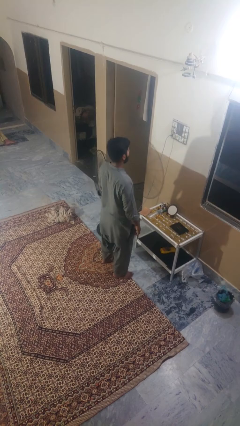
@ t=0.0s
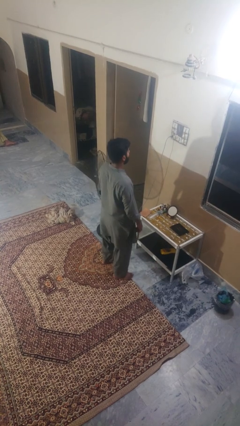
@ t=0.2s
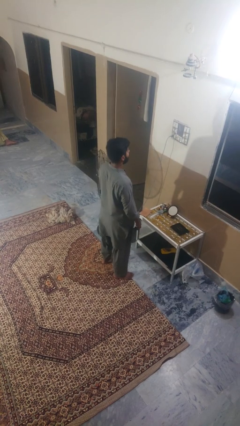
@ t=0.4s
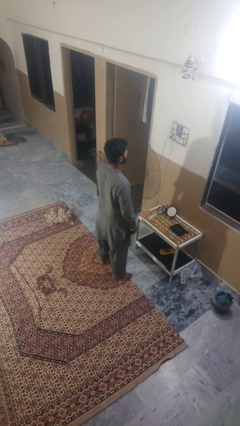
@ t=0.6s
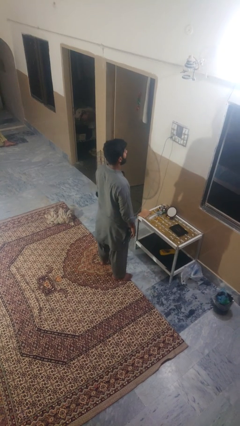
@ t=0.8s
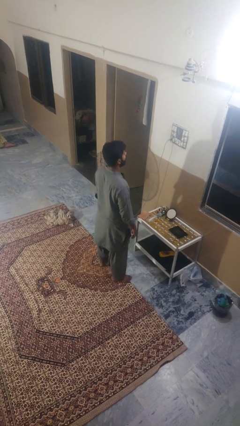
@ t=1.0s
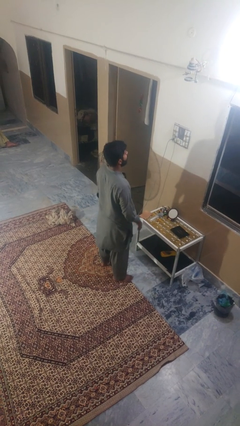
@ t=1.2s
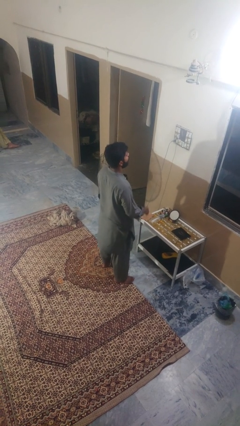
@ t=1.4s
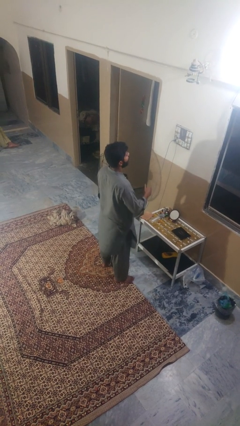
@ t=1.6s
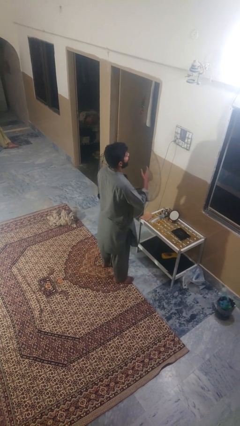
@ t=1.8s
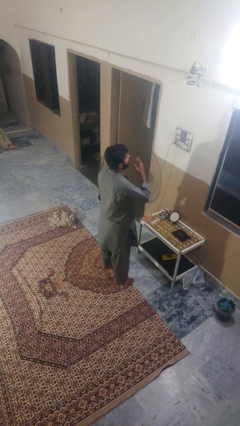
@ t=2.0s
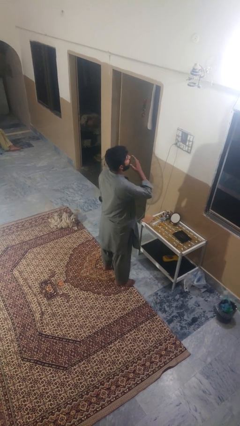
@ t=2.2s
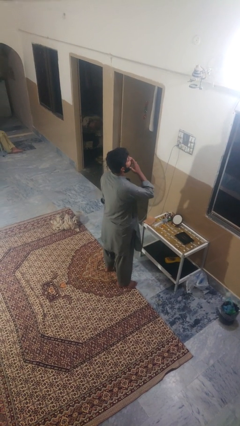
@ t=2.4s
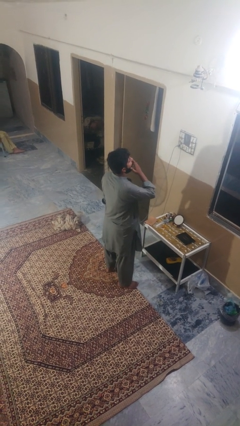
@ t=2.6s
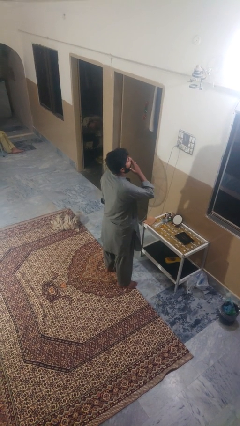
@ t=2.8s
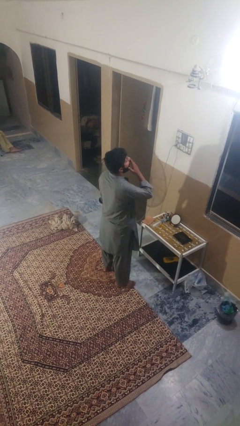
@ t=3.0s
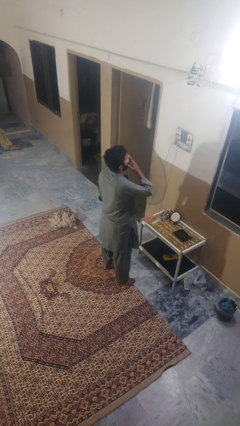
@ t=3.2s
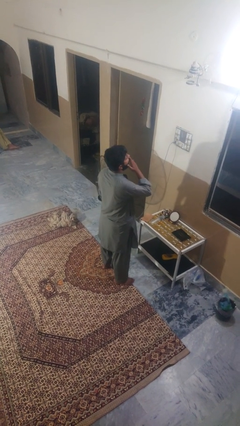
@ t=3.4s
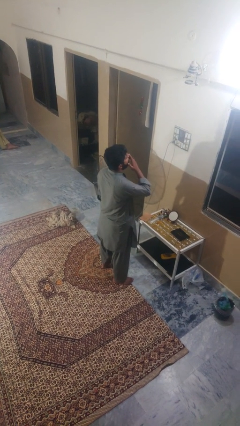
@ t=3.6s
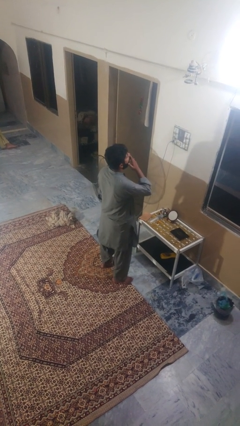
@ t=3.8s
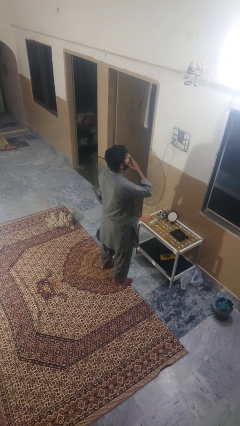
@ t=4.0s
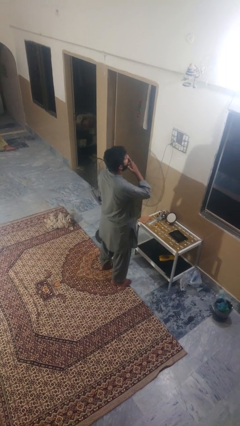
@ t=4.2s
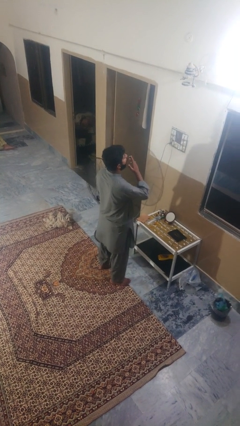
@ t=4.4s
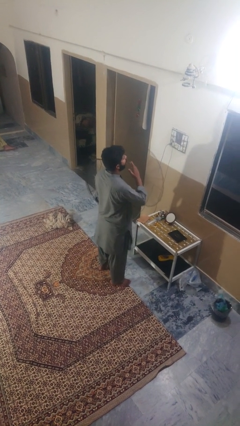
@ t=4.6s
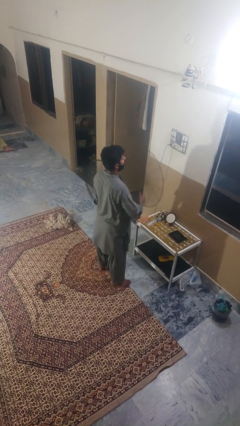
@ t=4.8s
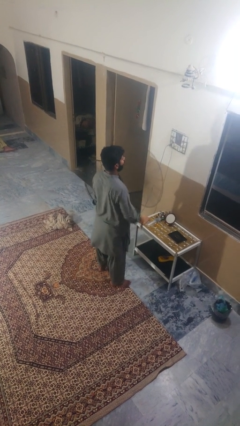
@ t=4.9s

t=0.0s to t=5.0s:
person yawns

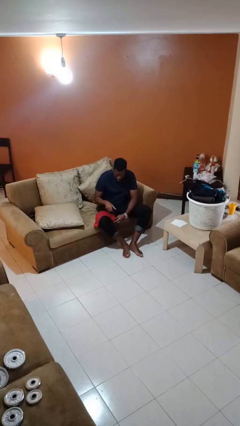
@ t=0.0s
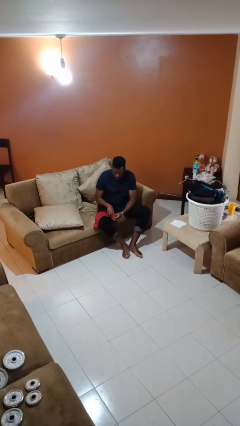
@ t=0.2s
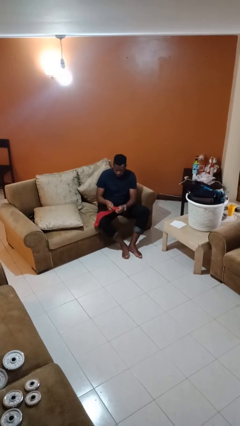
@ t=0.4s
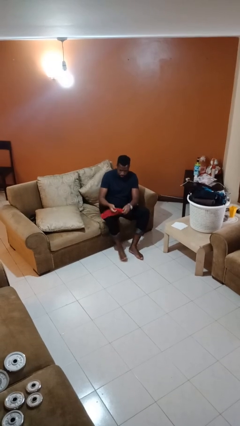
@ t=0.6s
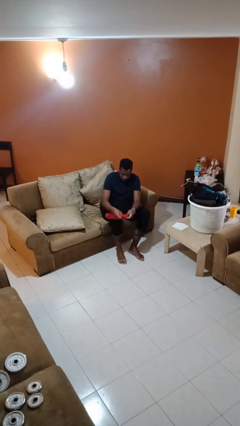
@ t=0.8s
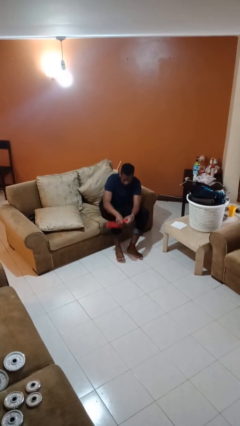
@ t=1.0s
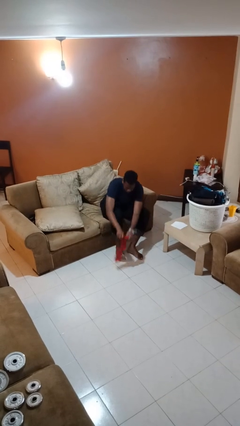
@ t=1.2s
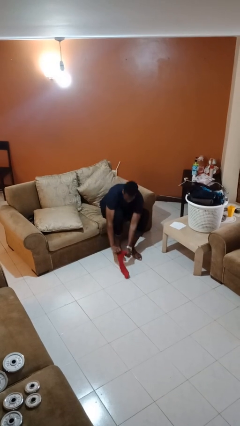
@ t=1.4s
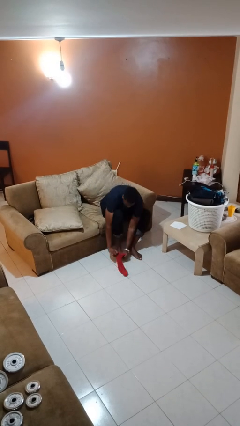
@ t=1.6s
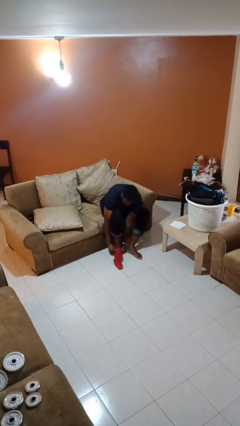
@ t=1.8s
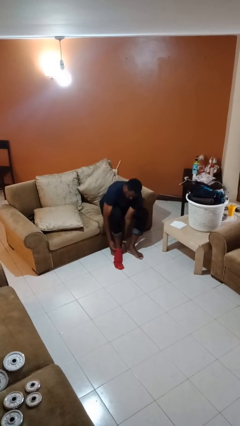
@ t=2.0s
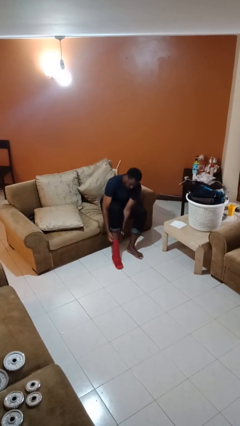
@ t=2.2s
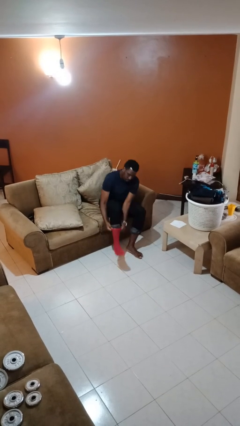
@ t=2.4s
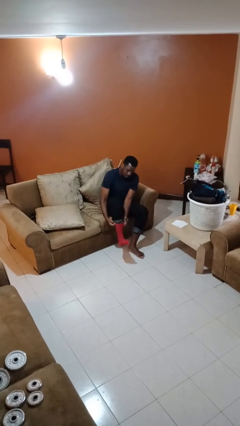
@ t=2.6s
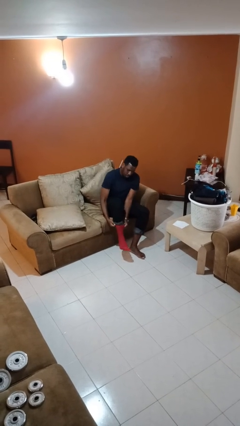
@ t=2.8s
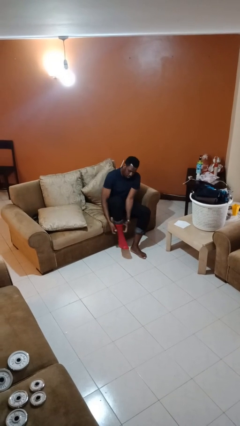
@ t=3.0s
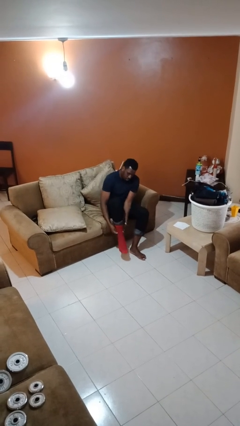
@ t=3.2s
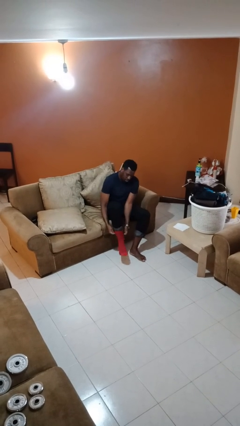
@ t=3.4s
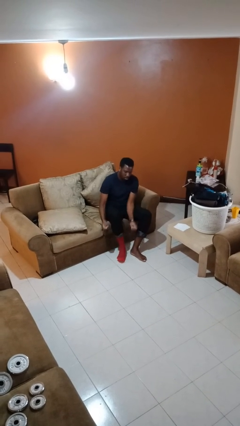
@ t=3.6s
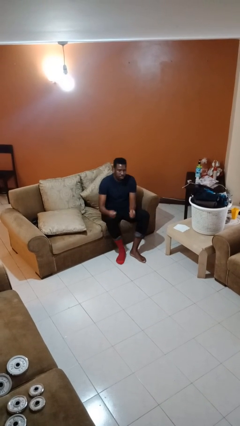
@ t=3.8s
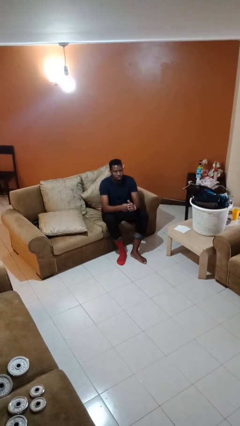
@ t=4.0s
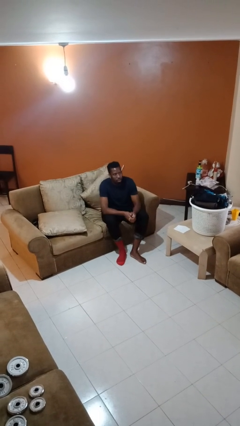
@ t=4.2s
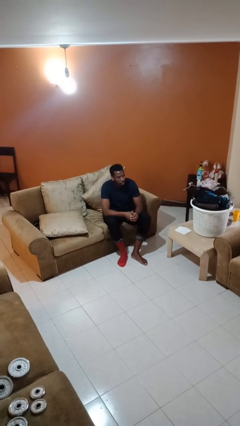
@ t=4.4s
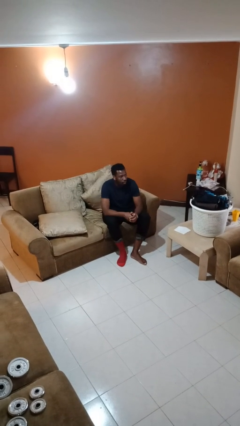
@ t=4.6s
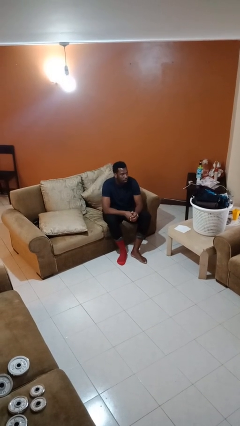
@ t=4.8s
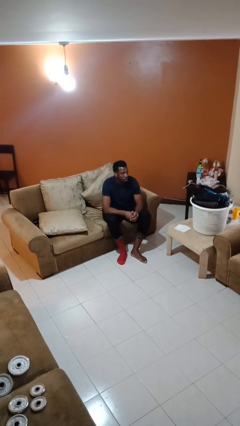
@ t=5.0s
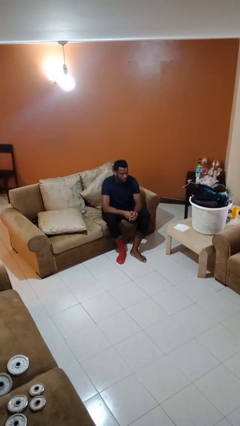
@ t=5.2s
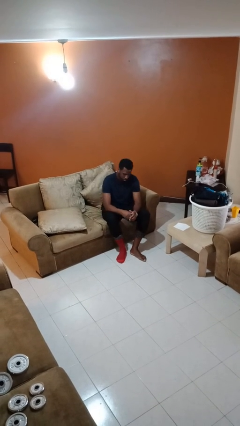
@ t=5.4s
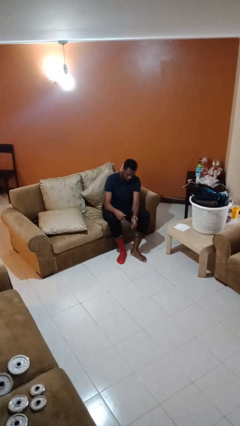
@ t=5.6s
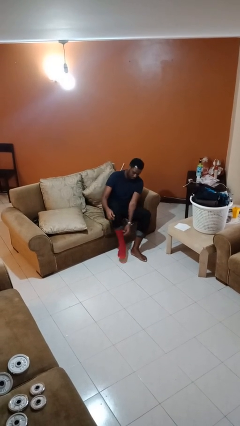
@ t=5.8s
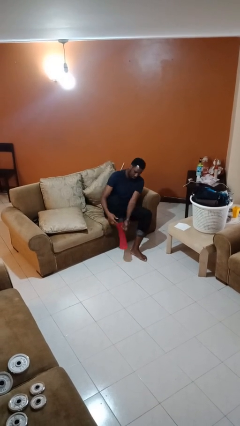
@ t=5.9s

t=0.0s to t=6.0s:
person puts on socks

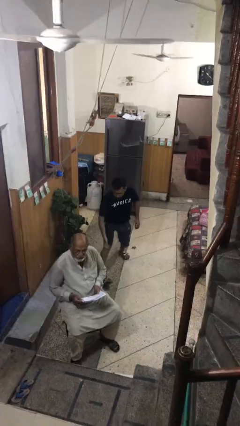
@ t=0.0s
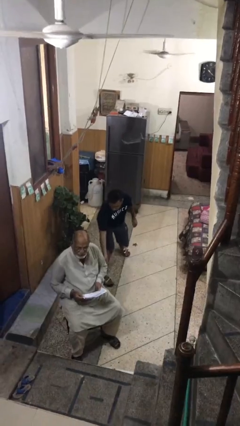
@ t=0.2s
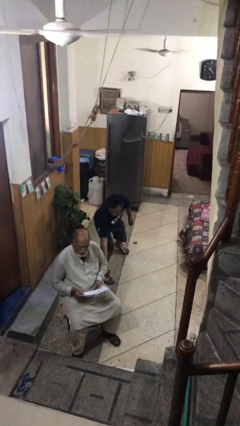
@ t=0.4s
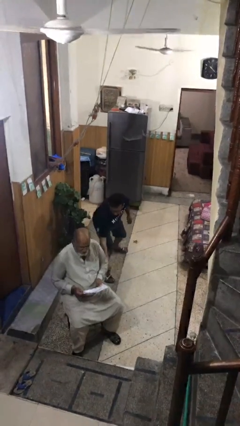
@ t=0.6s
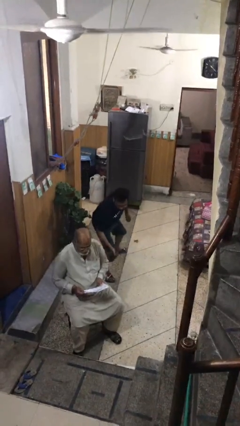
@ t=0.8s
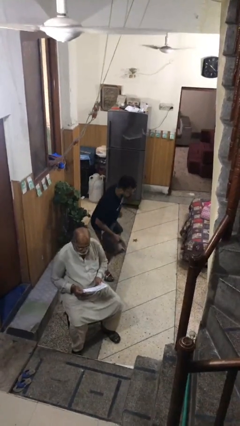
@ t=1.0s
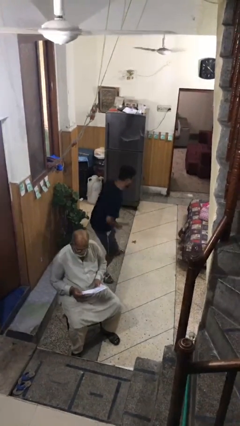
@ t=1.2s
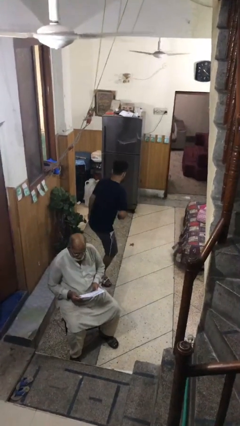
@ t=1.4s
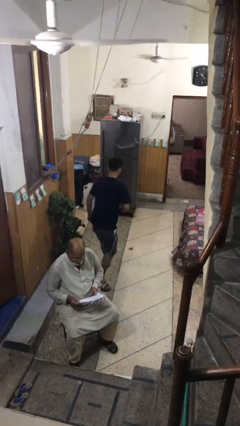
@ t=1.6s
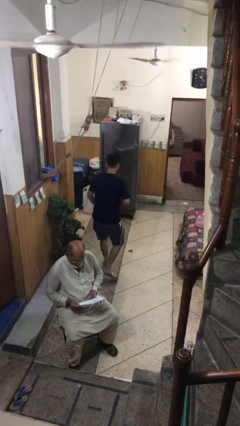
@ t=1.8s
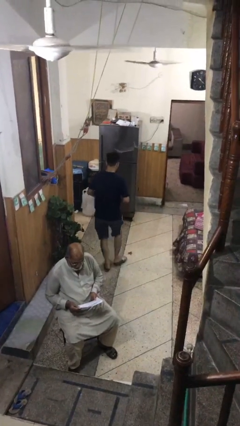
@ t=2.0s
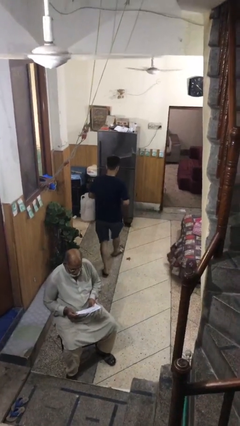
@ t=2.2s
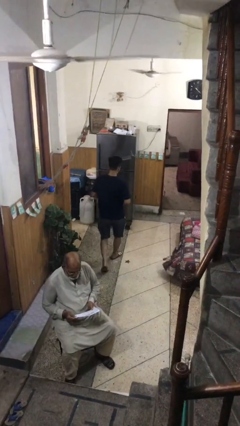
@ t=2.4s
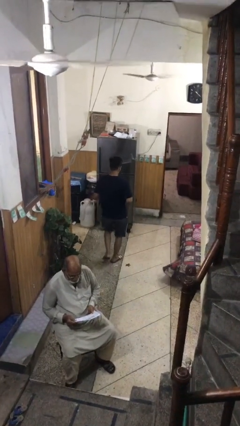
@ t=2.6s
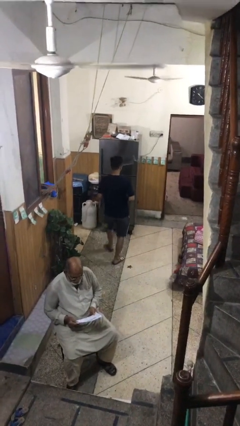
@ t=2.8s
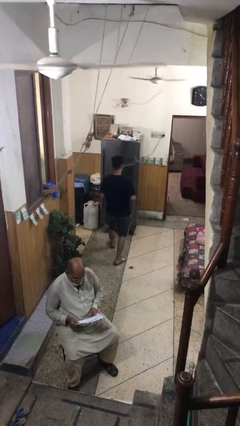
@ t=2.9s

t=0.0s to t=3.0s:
person steals object from person

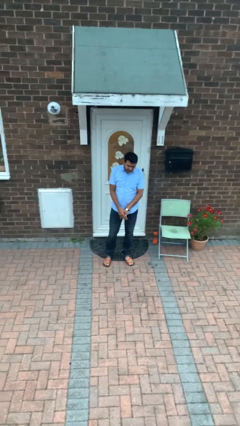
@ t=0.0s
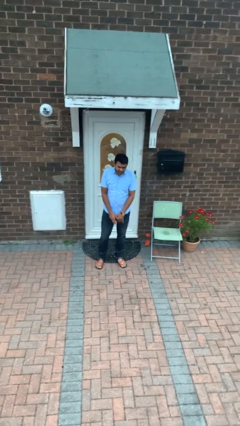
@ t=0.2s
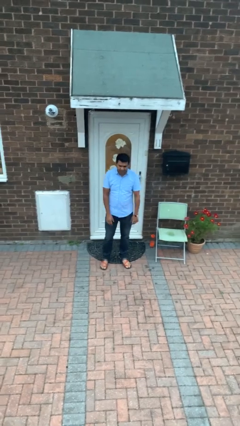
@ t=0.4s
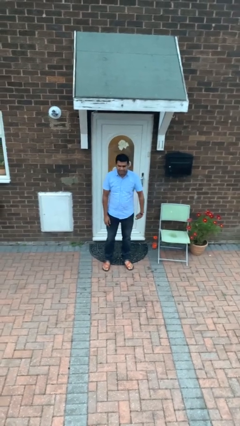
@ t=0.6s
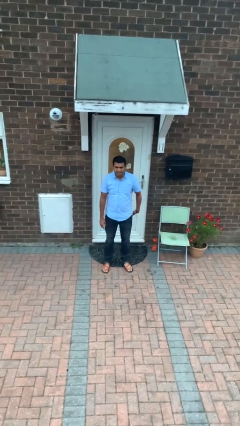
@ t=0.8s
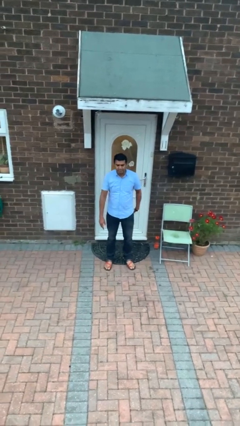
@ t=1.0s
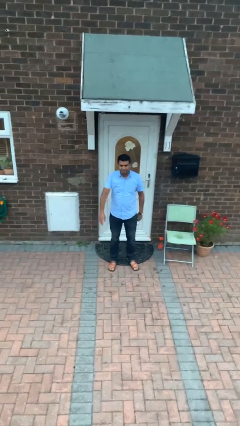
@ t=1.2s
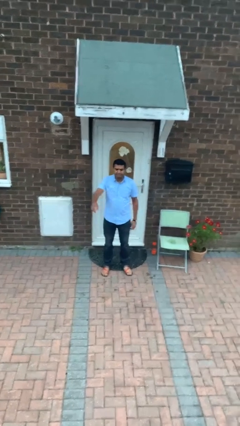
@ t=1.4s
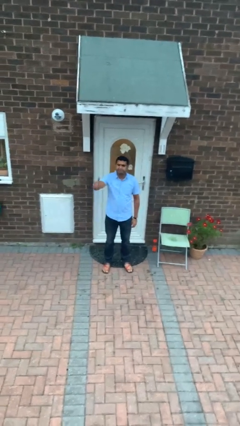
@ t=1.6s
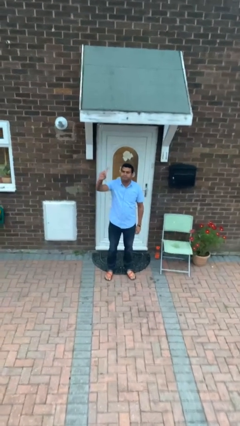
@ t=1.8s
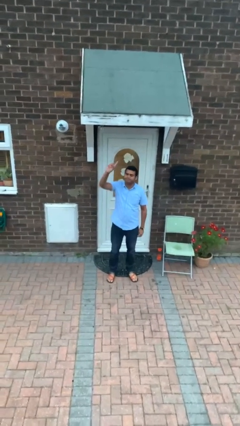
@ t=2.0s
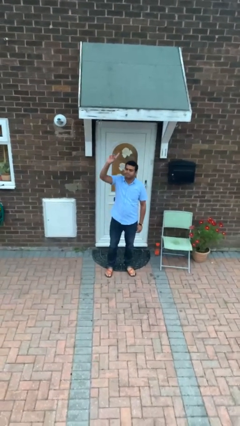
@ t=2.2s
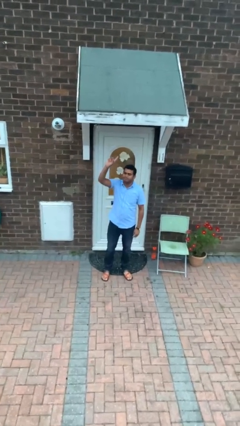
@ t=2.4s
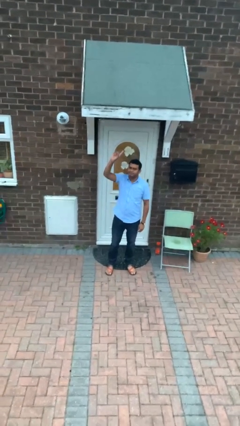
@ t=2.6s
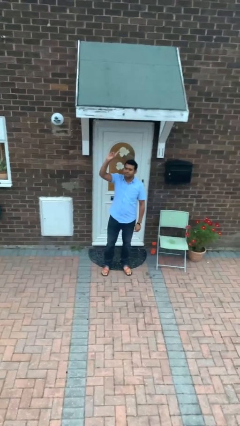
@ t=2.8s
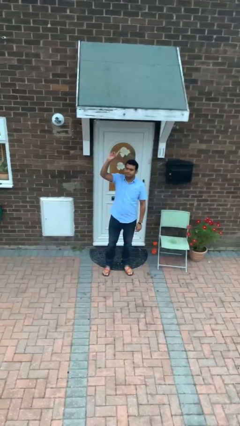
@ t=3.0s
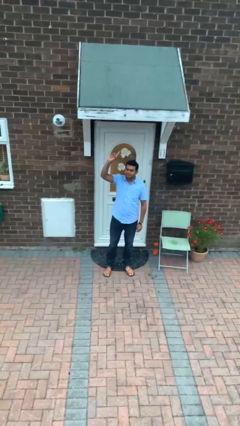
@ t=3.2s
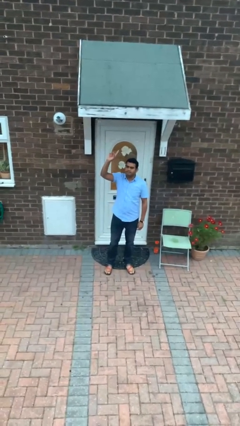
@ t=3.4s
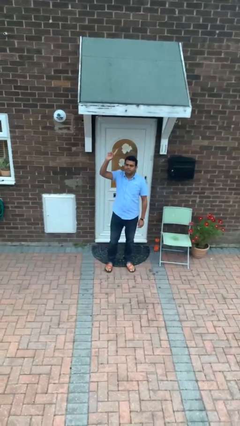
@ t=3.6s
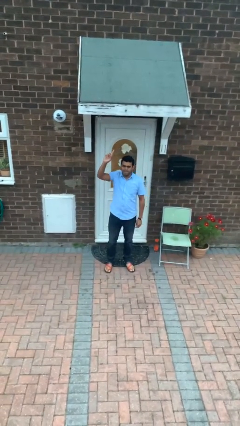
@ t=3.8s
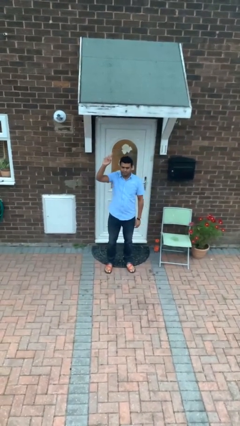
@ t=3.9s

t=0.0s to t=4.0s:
person gestures raise hand
